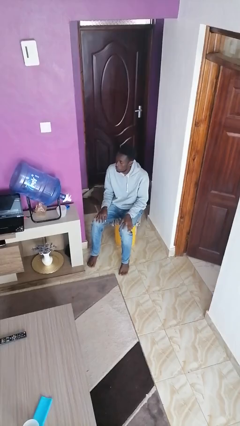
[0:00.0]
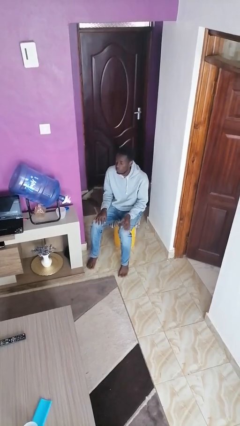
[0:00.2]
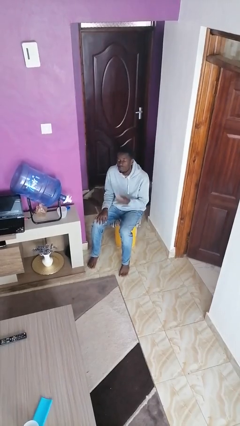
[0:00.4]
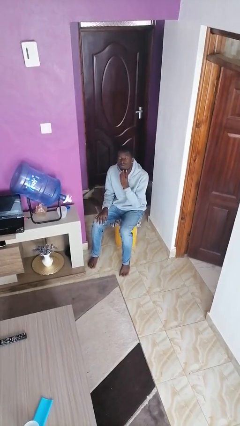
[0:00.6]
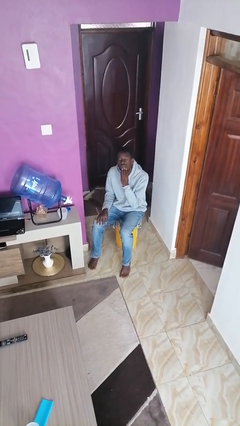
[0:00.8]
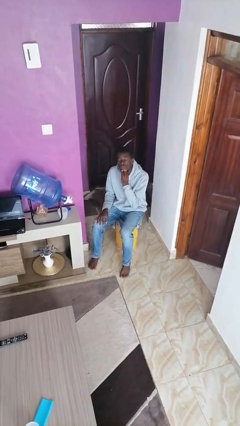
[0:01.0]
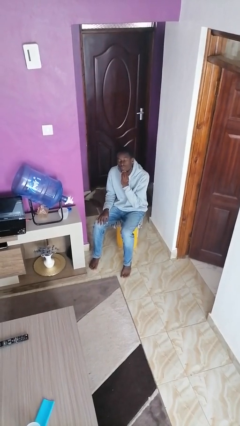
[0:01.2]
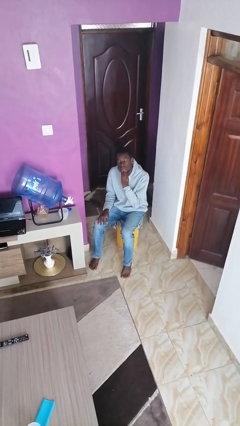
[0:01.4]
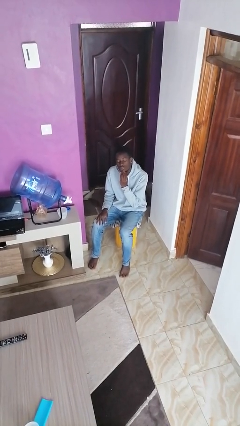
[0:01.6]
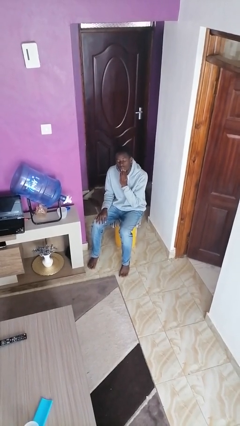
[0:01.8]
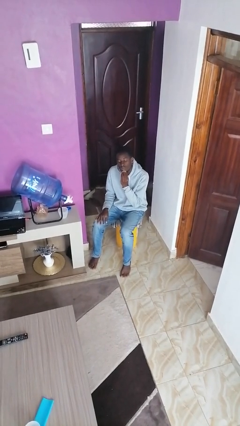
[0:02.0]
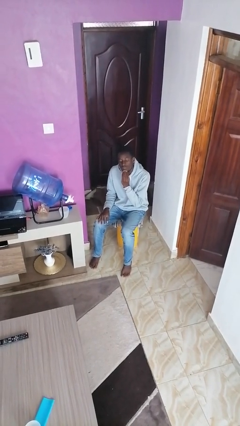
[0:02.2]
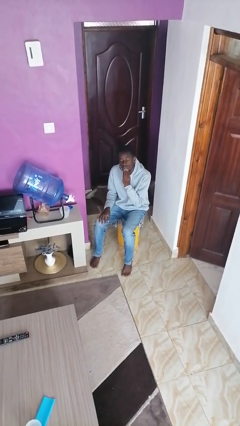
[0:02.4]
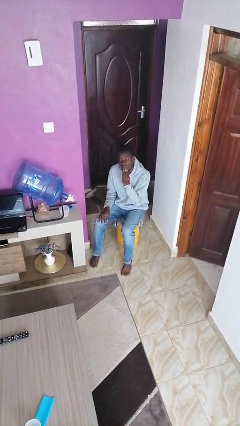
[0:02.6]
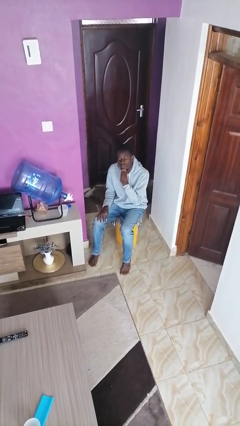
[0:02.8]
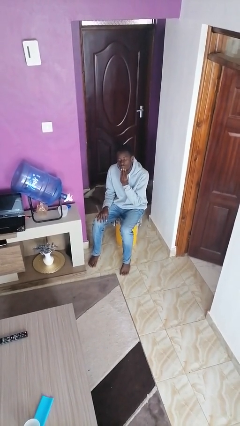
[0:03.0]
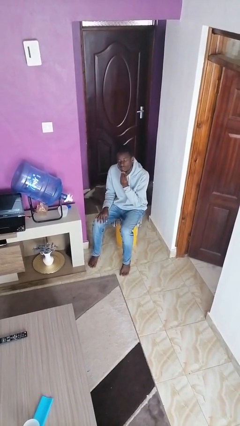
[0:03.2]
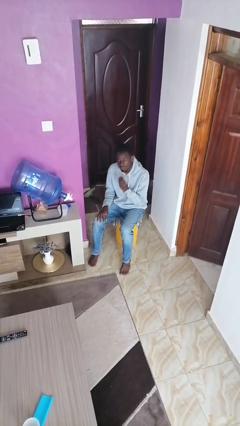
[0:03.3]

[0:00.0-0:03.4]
person strokes chin

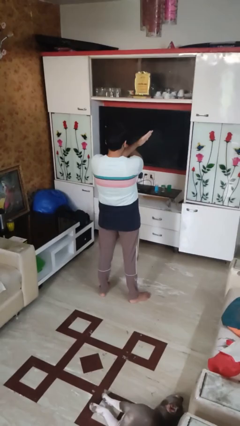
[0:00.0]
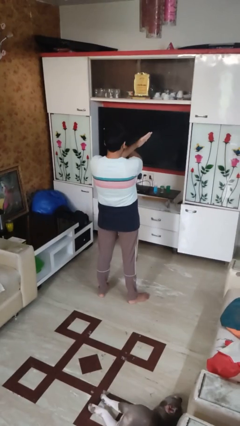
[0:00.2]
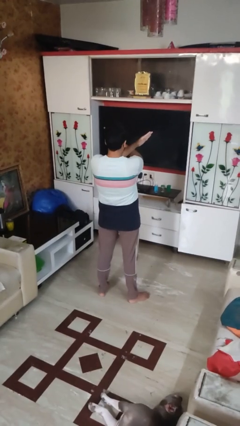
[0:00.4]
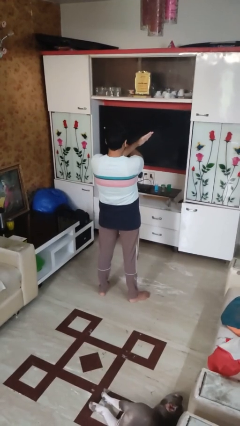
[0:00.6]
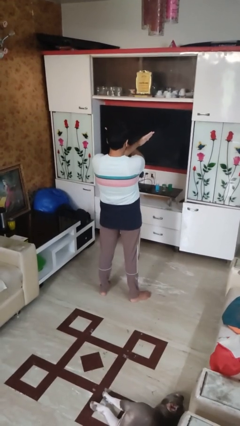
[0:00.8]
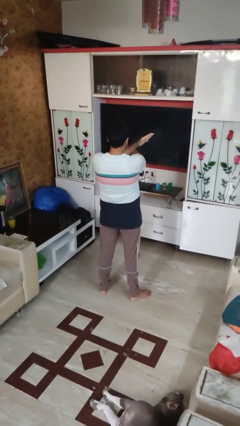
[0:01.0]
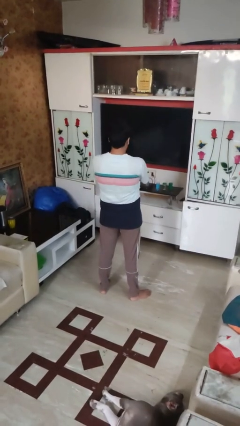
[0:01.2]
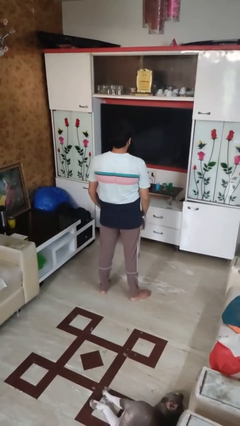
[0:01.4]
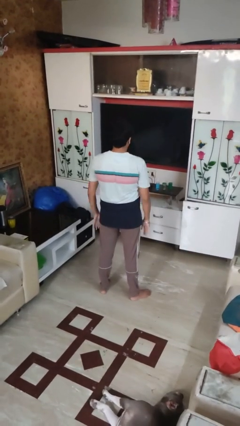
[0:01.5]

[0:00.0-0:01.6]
person gestures arms x

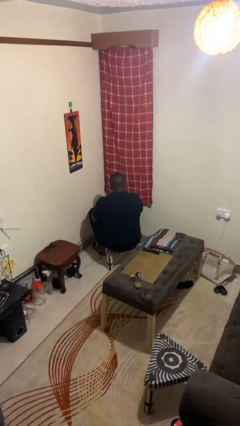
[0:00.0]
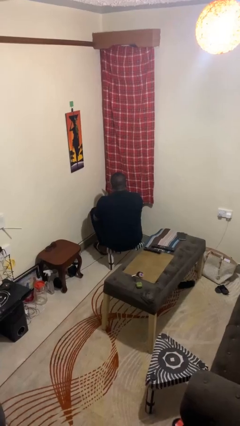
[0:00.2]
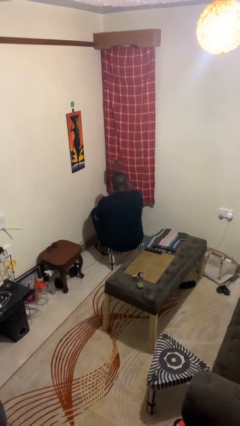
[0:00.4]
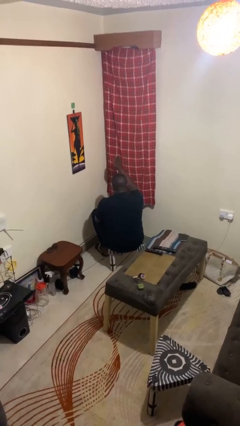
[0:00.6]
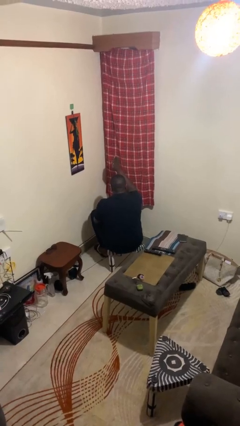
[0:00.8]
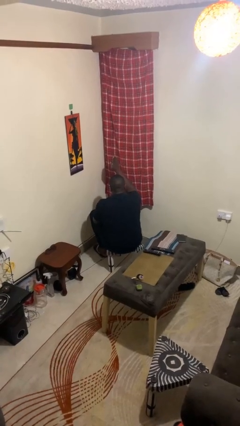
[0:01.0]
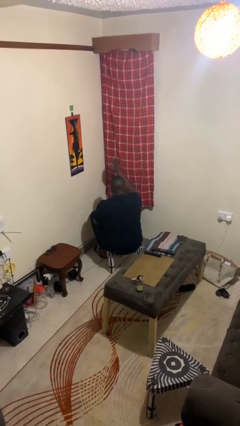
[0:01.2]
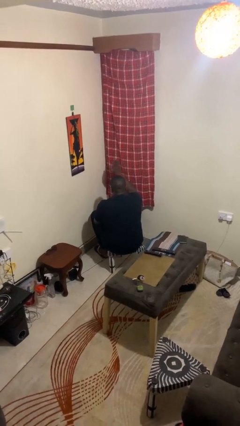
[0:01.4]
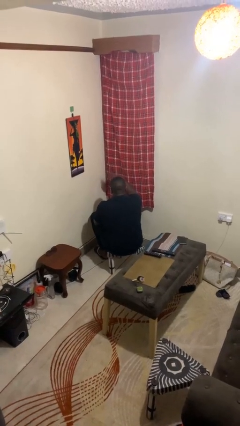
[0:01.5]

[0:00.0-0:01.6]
person gestures swipe up

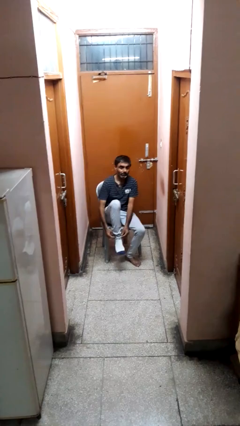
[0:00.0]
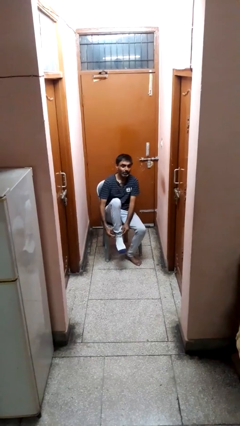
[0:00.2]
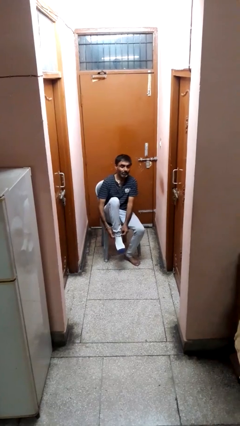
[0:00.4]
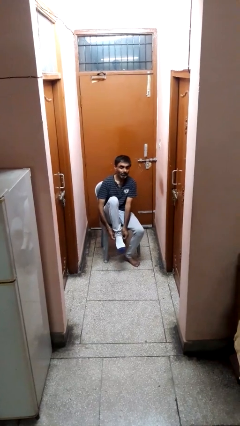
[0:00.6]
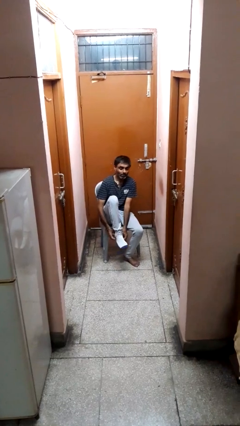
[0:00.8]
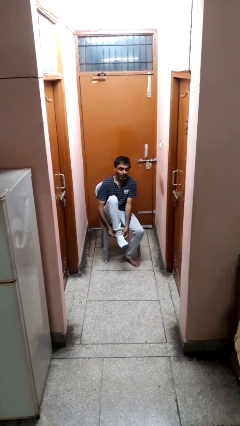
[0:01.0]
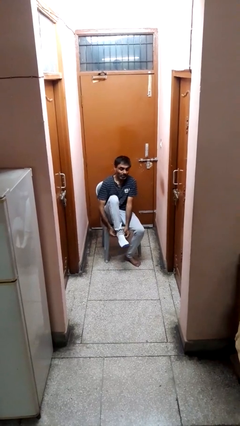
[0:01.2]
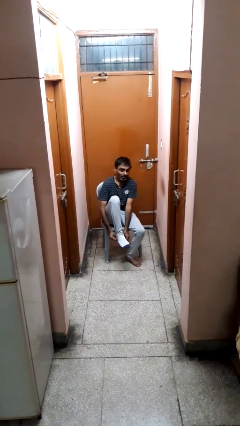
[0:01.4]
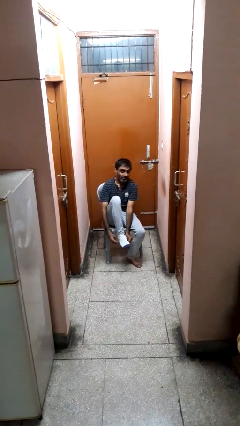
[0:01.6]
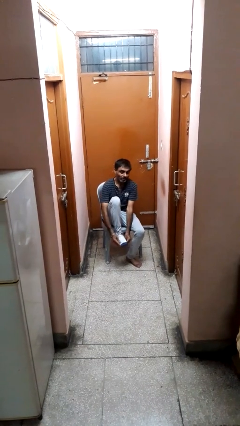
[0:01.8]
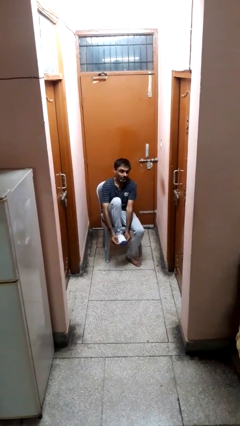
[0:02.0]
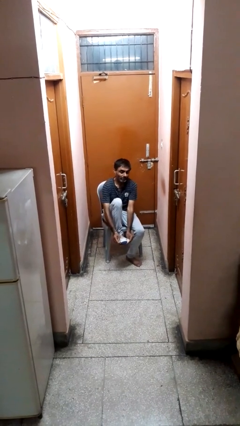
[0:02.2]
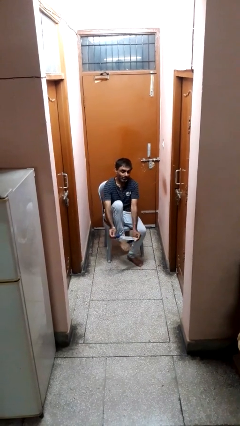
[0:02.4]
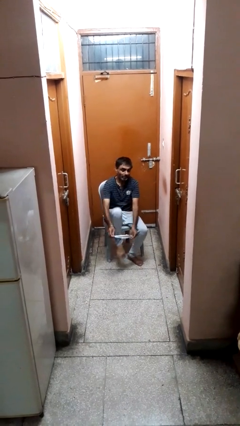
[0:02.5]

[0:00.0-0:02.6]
person takes off socks

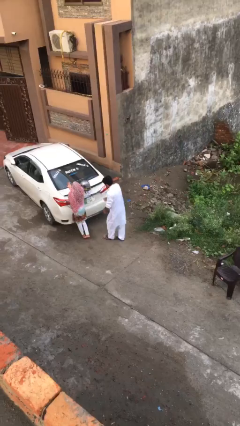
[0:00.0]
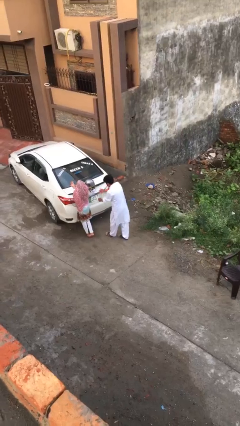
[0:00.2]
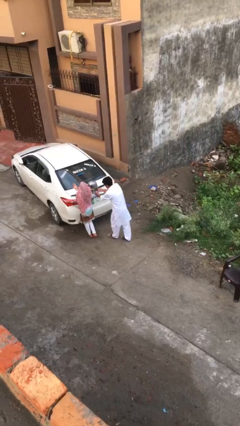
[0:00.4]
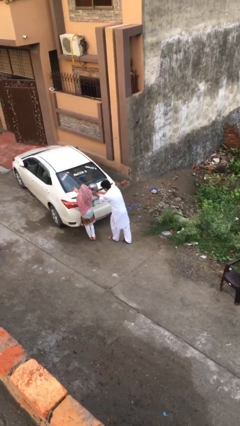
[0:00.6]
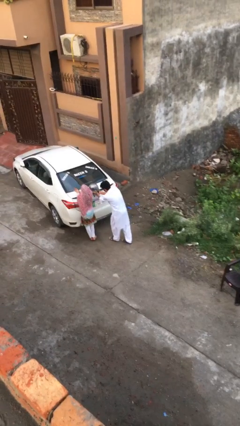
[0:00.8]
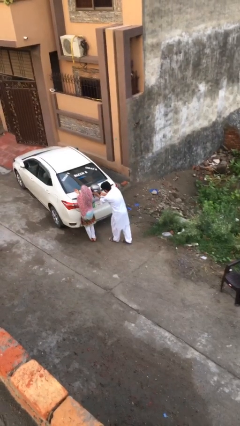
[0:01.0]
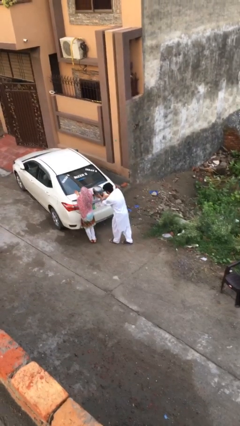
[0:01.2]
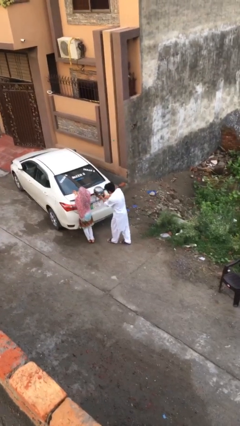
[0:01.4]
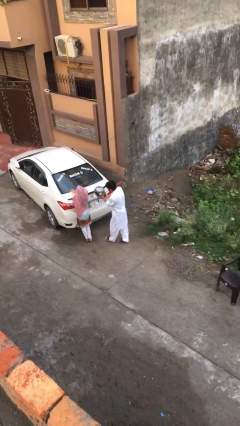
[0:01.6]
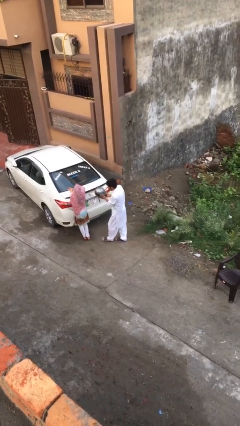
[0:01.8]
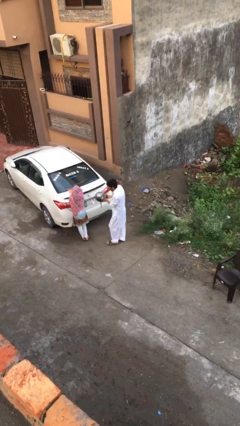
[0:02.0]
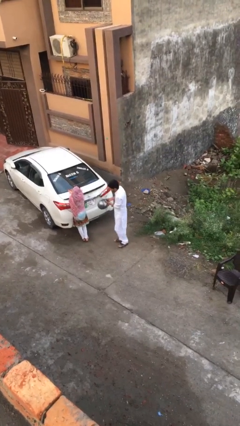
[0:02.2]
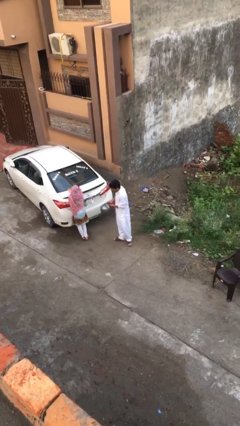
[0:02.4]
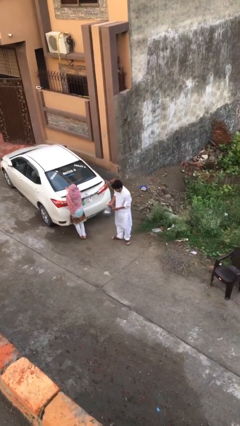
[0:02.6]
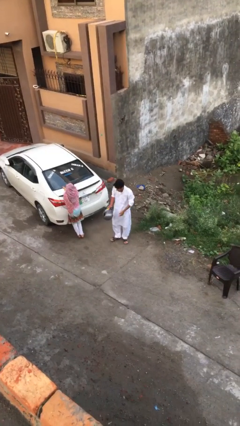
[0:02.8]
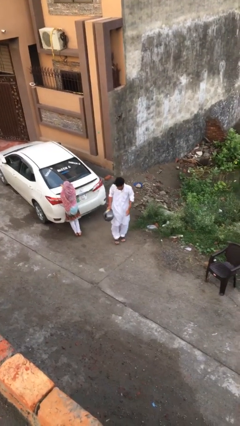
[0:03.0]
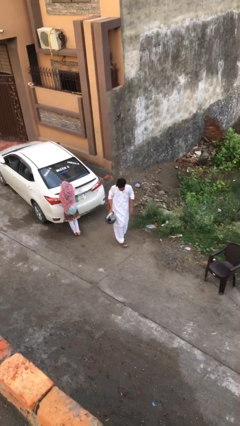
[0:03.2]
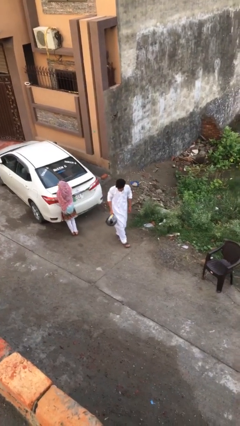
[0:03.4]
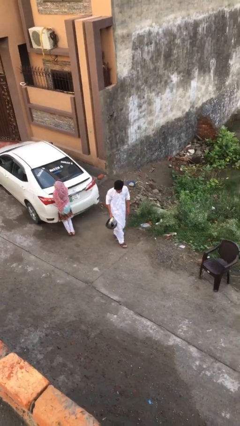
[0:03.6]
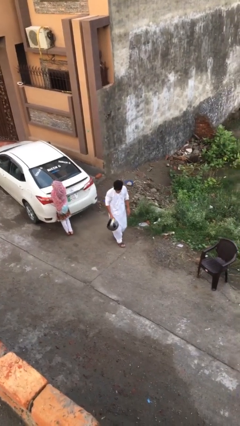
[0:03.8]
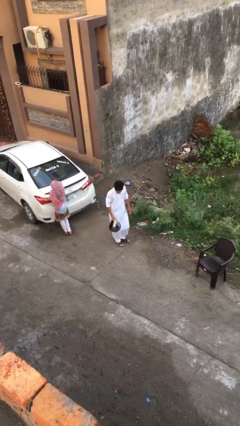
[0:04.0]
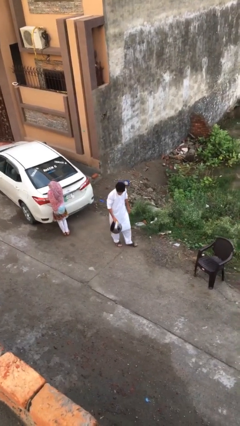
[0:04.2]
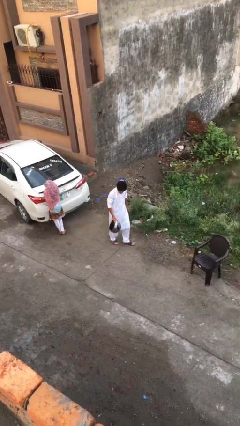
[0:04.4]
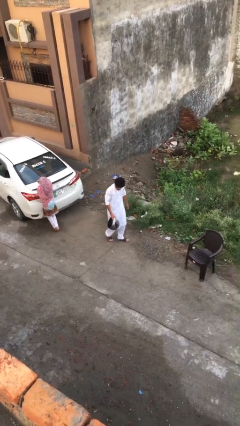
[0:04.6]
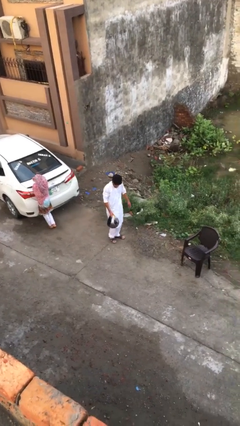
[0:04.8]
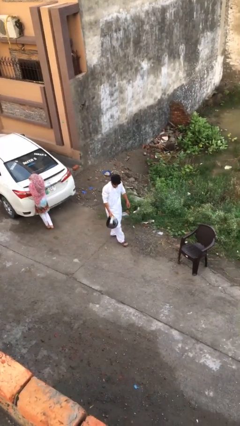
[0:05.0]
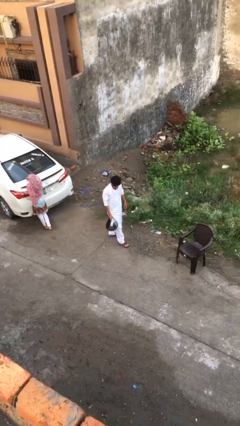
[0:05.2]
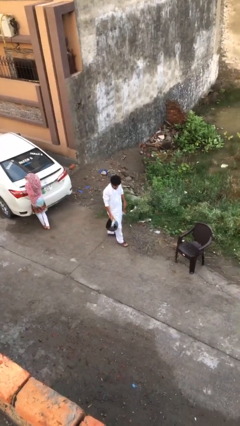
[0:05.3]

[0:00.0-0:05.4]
person steals object from person

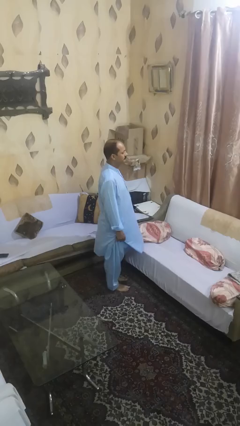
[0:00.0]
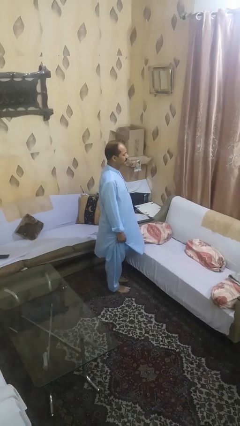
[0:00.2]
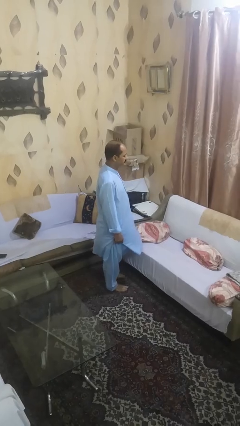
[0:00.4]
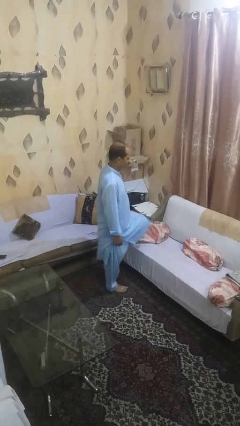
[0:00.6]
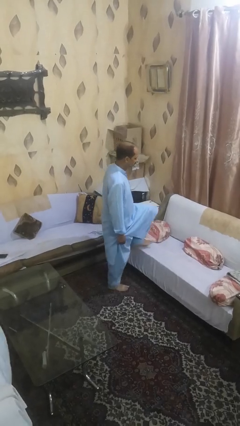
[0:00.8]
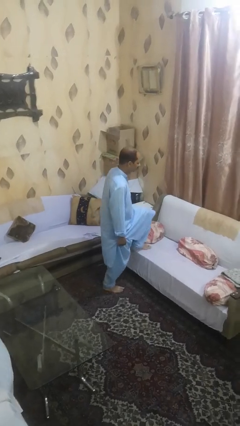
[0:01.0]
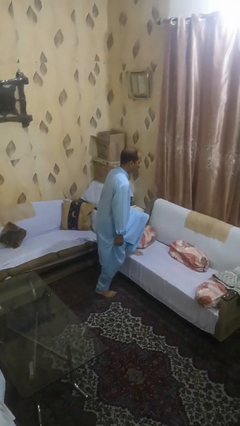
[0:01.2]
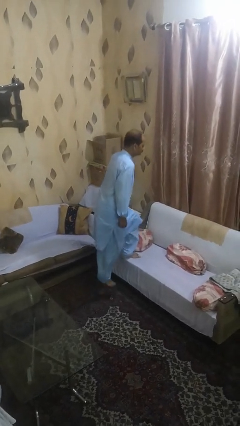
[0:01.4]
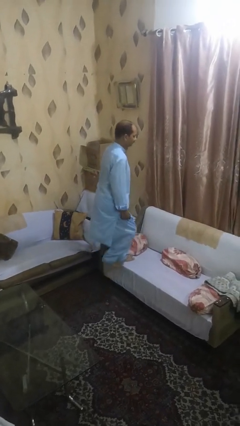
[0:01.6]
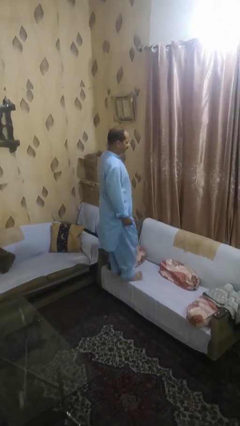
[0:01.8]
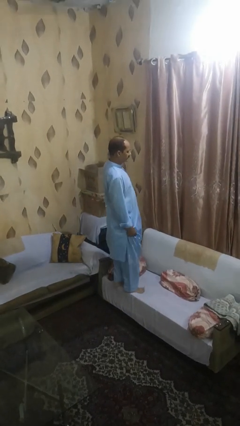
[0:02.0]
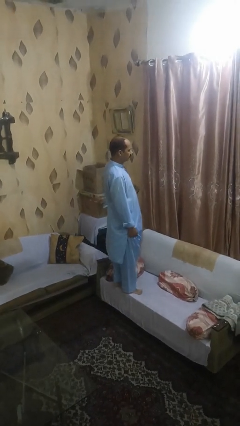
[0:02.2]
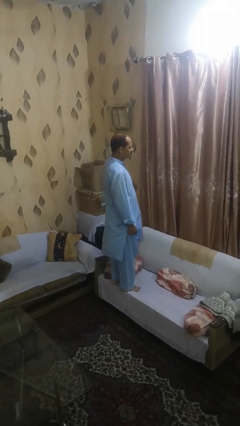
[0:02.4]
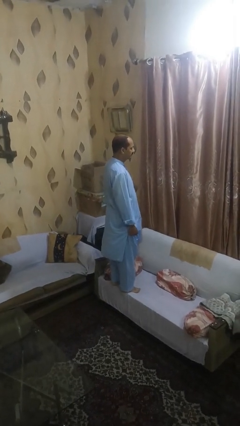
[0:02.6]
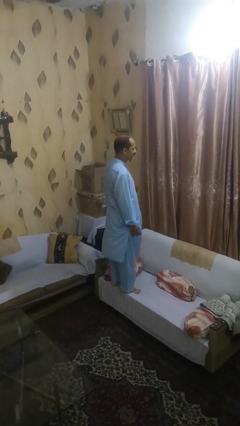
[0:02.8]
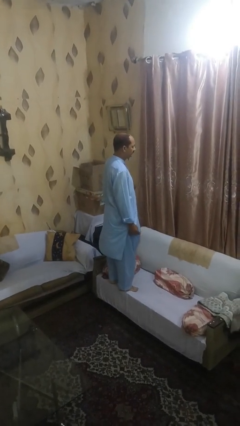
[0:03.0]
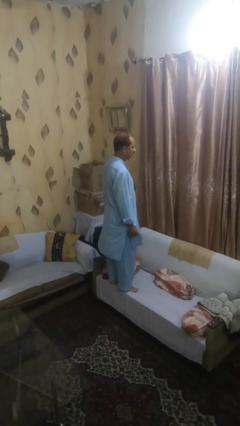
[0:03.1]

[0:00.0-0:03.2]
person climbs on chair
